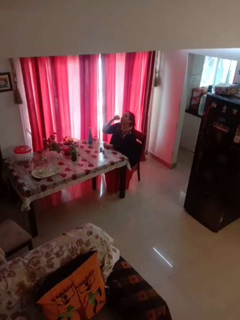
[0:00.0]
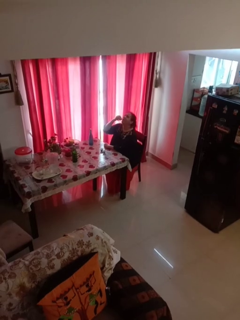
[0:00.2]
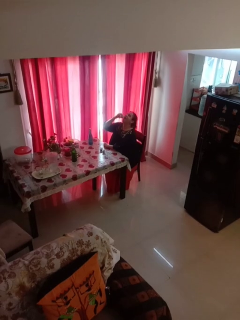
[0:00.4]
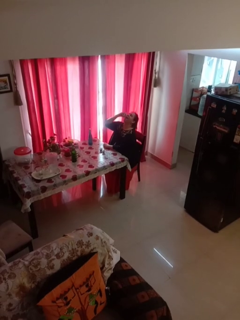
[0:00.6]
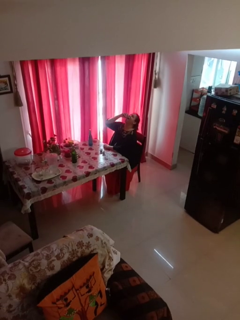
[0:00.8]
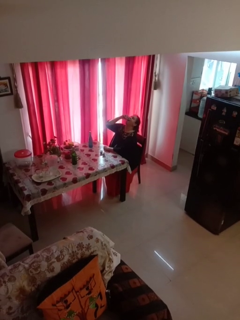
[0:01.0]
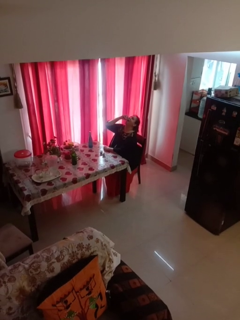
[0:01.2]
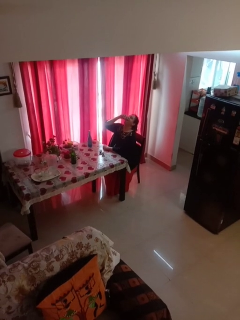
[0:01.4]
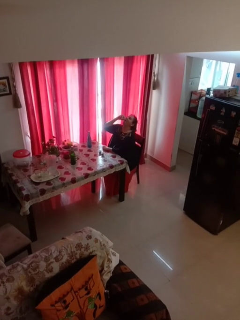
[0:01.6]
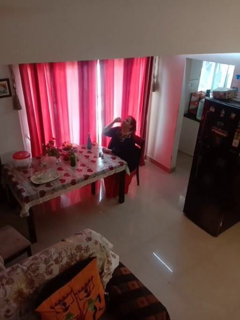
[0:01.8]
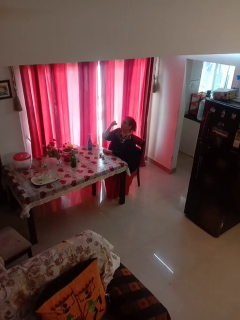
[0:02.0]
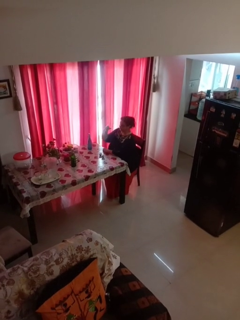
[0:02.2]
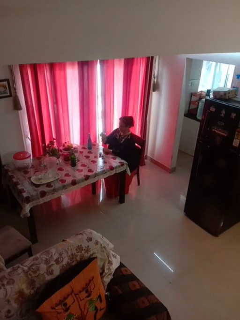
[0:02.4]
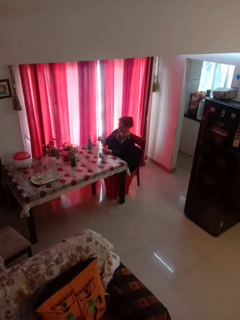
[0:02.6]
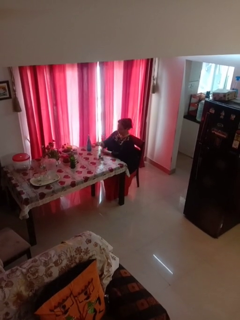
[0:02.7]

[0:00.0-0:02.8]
person drinks from shotglass

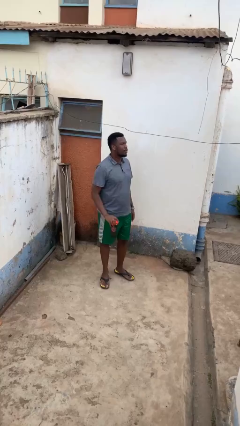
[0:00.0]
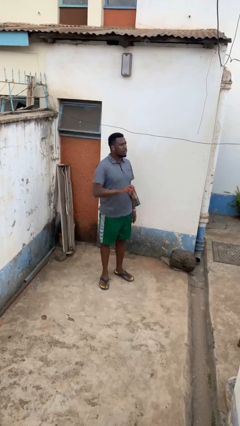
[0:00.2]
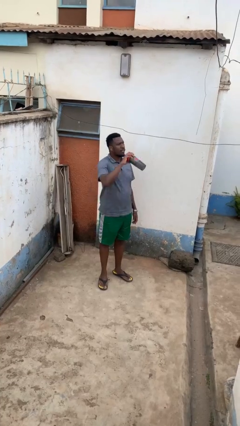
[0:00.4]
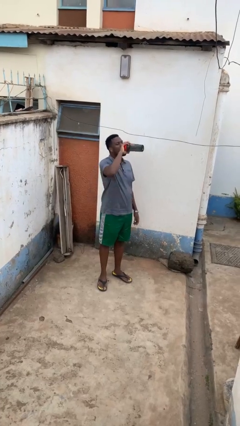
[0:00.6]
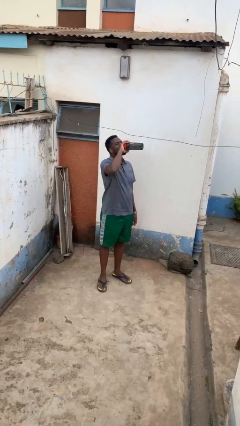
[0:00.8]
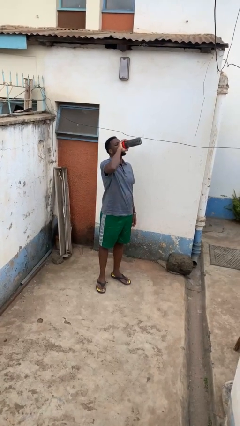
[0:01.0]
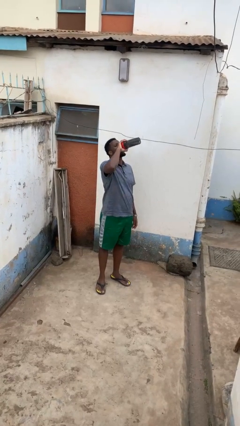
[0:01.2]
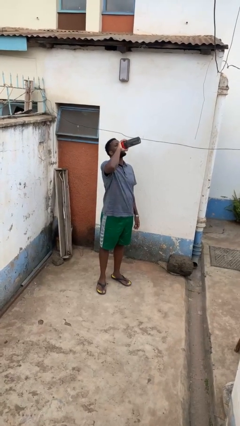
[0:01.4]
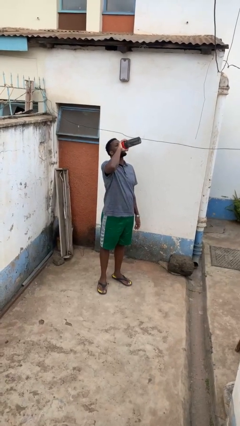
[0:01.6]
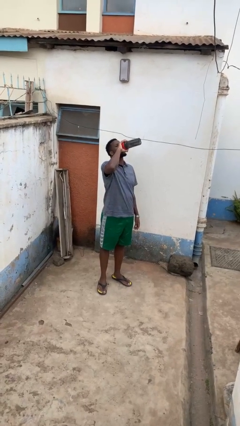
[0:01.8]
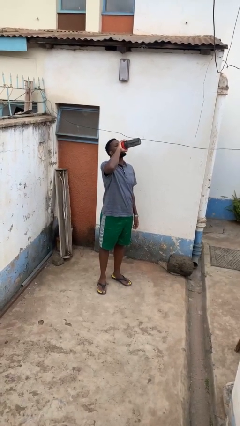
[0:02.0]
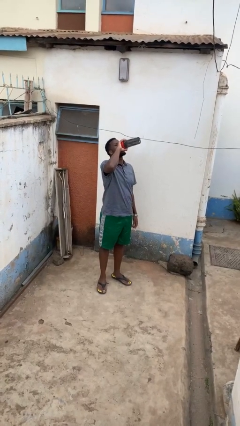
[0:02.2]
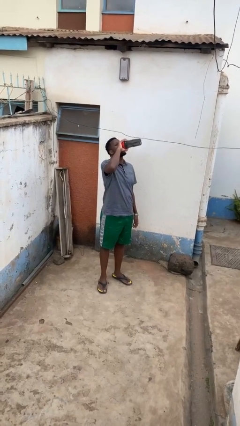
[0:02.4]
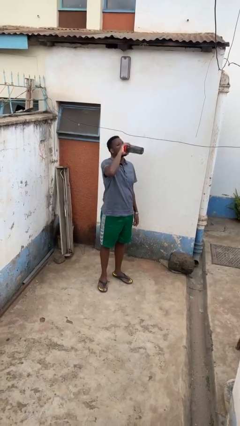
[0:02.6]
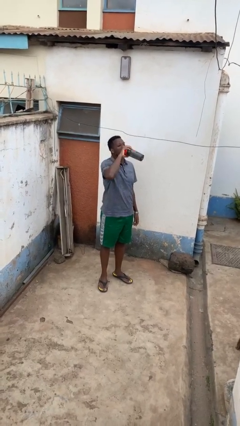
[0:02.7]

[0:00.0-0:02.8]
person drinks from bottle

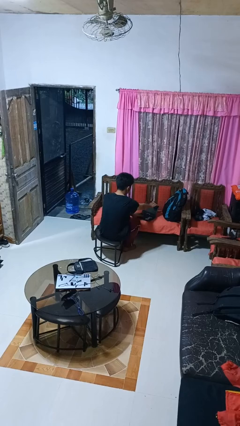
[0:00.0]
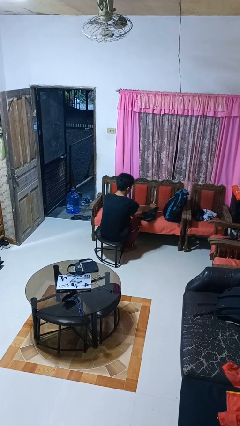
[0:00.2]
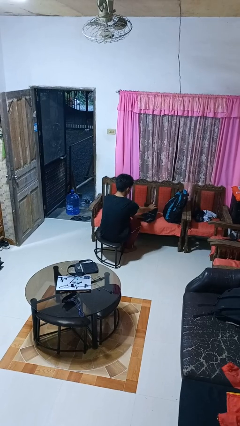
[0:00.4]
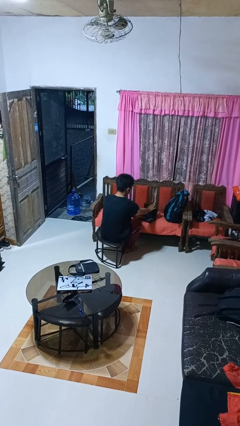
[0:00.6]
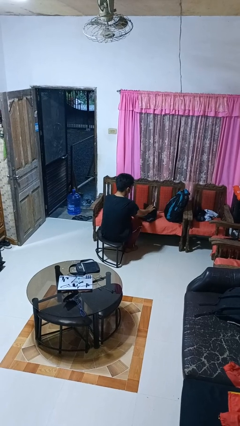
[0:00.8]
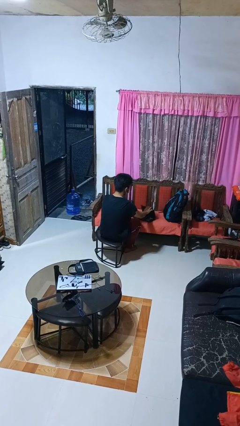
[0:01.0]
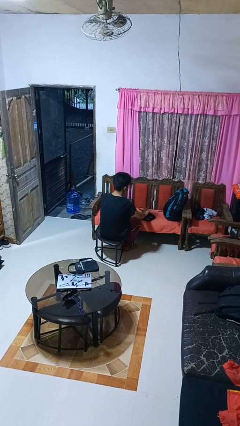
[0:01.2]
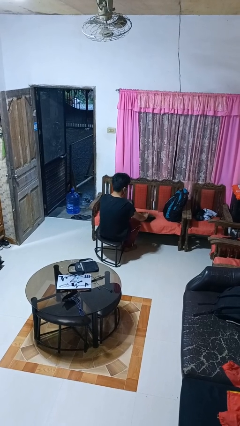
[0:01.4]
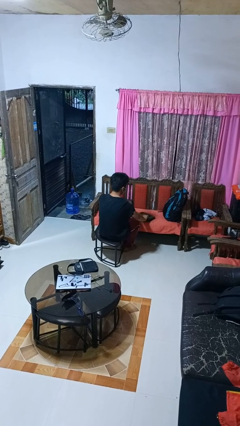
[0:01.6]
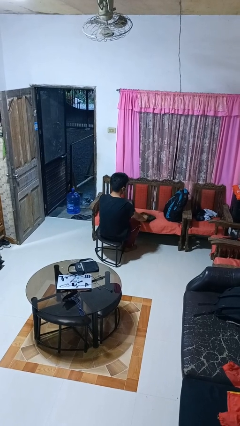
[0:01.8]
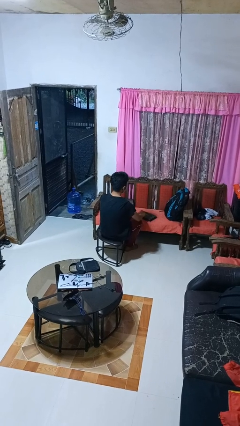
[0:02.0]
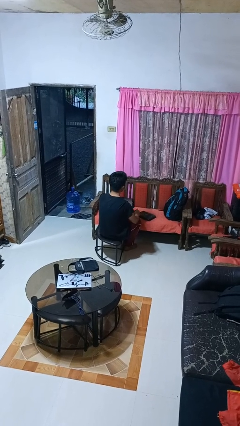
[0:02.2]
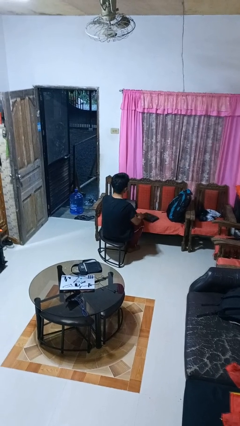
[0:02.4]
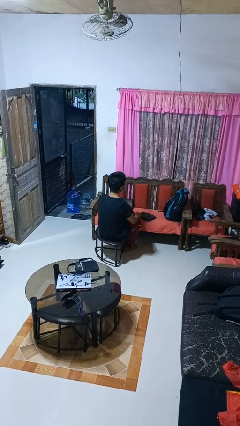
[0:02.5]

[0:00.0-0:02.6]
person closes laptop

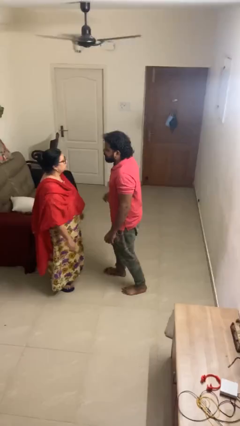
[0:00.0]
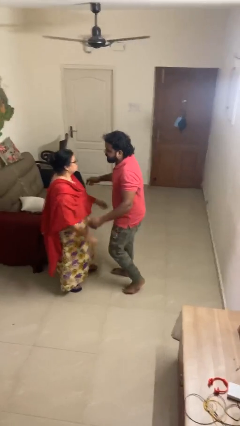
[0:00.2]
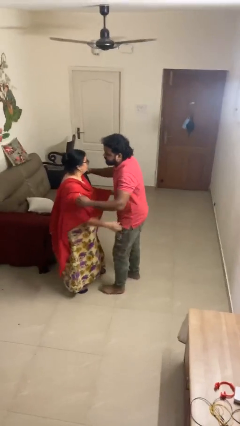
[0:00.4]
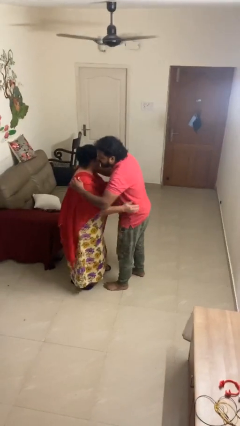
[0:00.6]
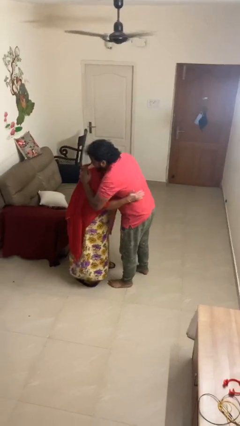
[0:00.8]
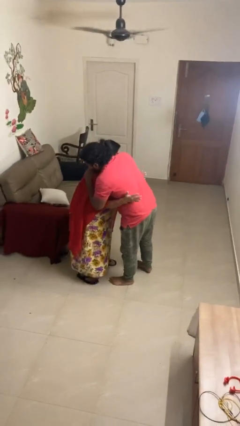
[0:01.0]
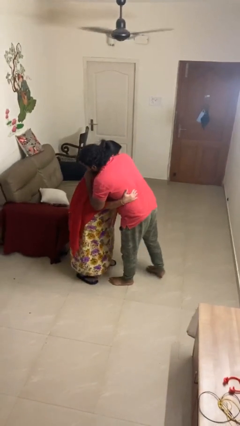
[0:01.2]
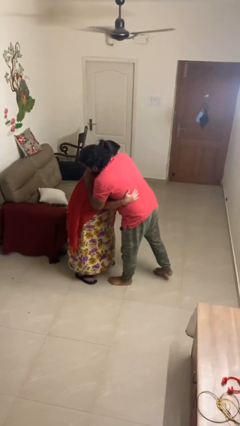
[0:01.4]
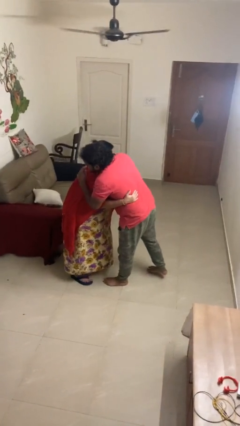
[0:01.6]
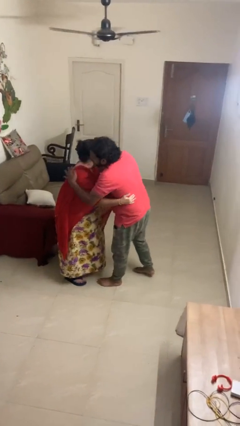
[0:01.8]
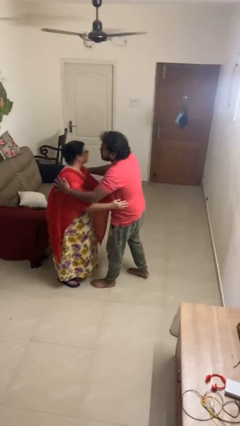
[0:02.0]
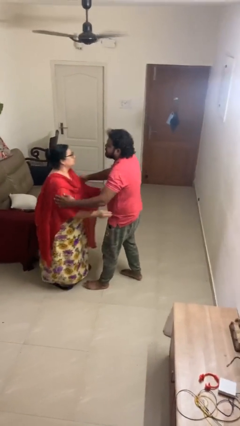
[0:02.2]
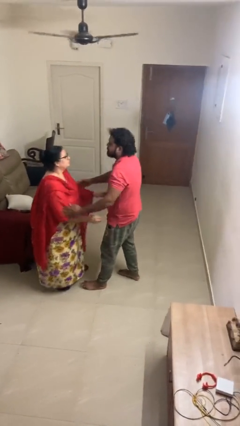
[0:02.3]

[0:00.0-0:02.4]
person embraces person

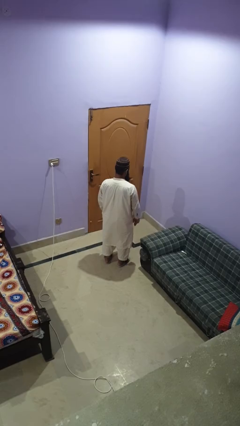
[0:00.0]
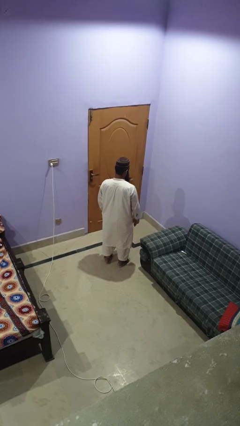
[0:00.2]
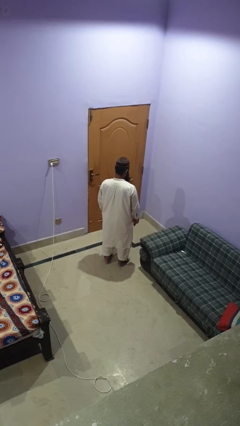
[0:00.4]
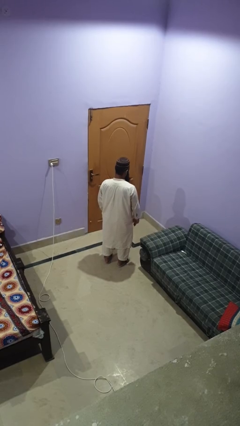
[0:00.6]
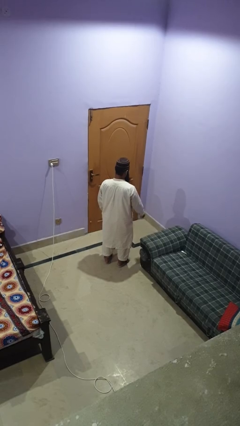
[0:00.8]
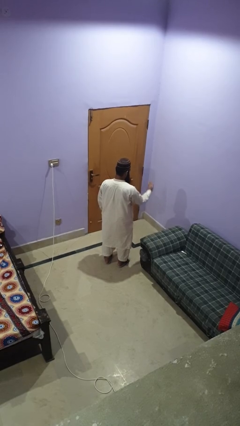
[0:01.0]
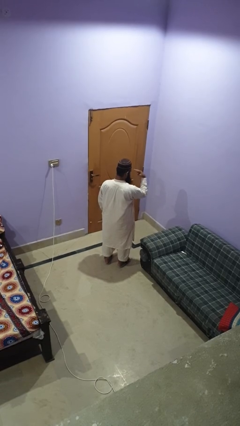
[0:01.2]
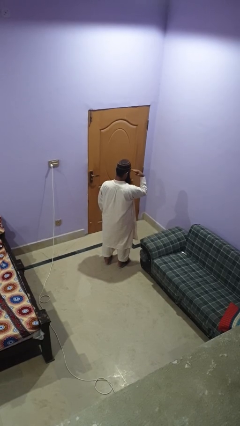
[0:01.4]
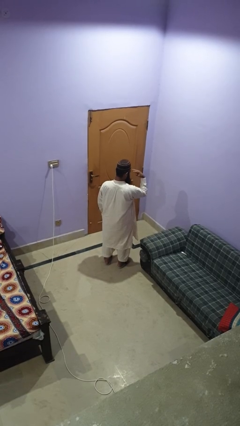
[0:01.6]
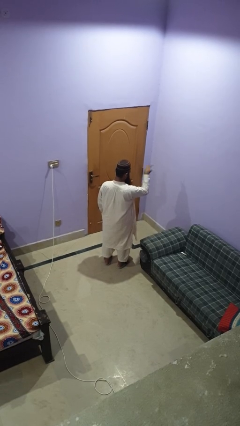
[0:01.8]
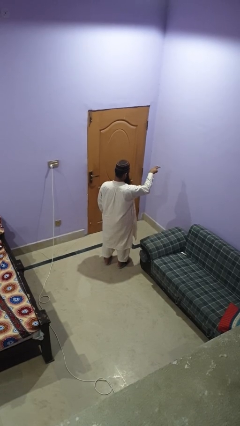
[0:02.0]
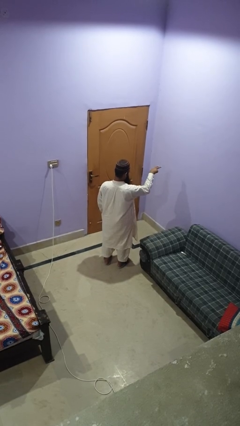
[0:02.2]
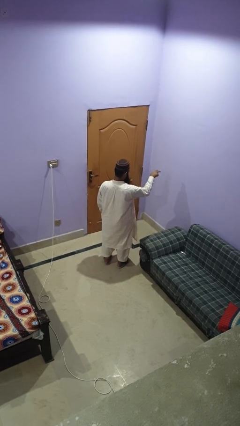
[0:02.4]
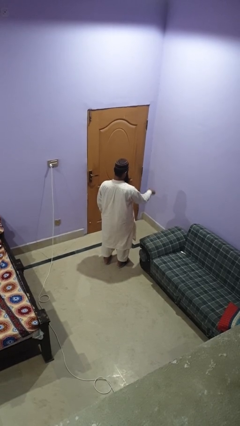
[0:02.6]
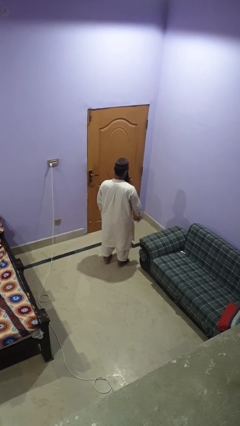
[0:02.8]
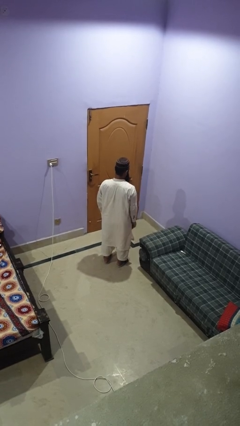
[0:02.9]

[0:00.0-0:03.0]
person gestures watch closely

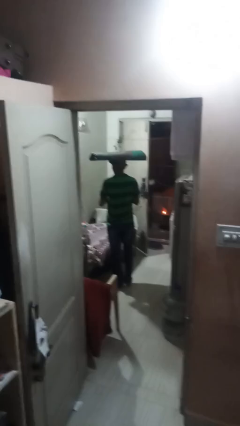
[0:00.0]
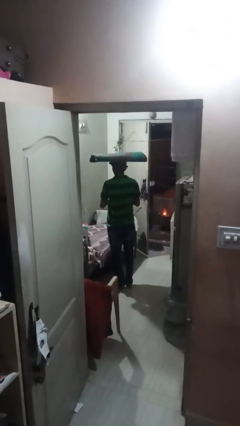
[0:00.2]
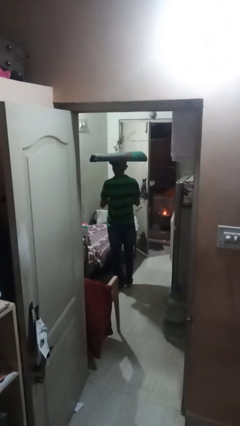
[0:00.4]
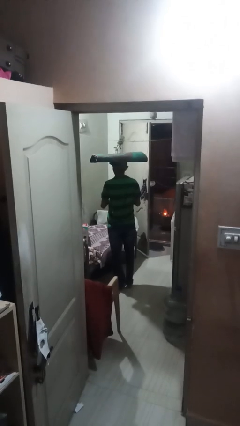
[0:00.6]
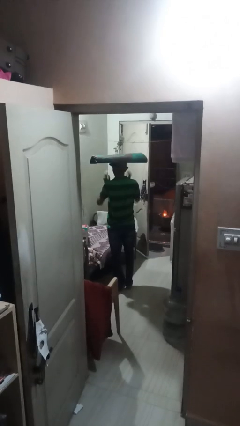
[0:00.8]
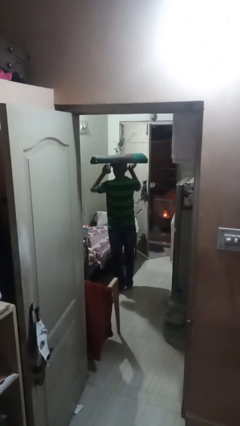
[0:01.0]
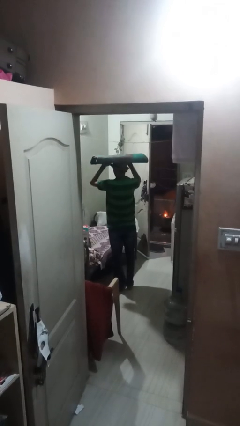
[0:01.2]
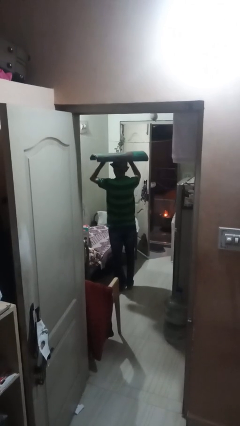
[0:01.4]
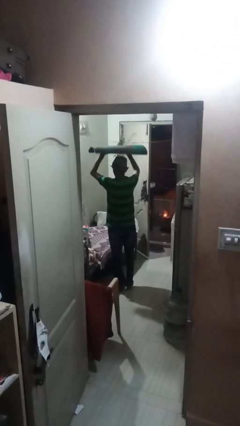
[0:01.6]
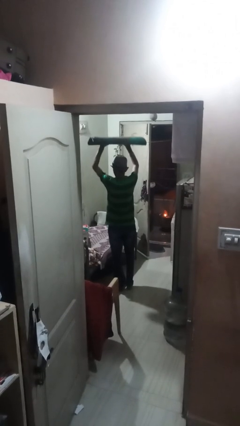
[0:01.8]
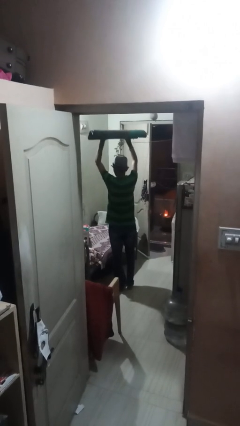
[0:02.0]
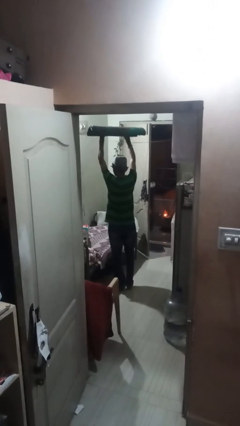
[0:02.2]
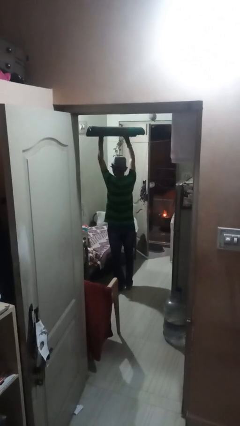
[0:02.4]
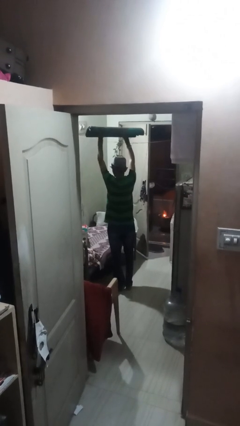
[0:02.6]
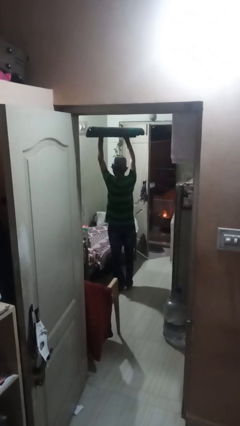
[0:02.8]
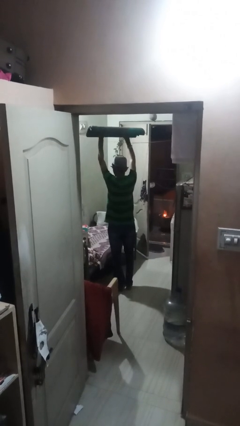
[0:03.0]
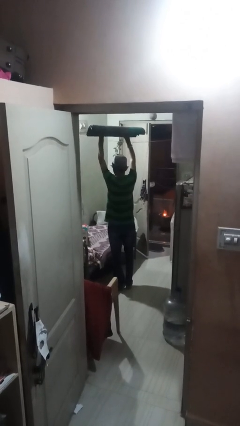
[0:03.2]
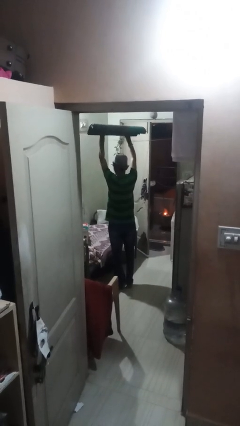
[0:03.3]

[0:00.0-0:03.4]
person holds object above head

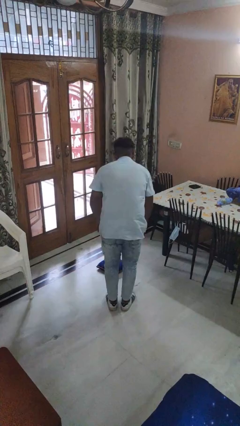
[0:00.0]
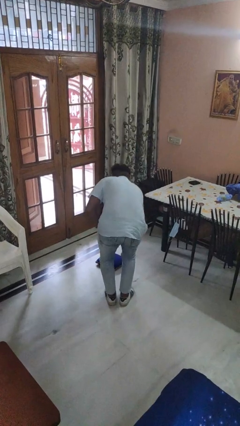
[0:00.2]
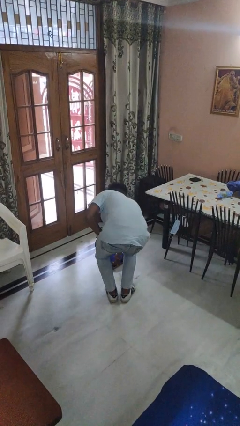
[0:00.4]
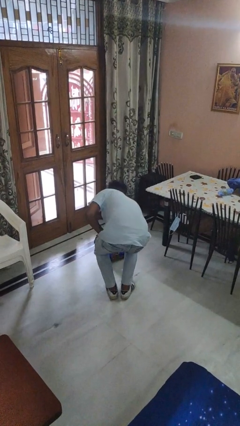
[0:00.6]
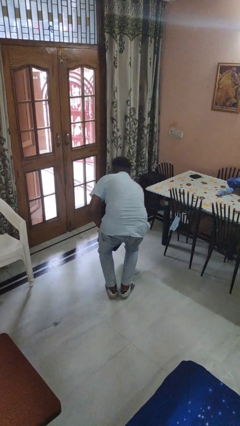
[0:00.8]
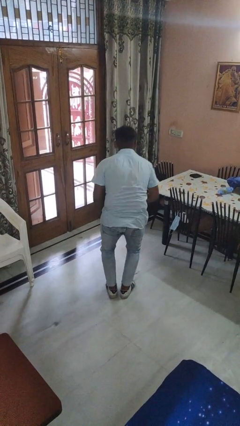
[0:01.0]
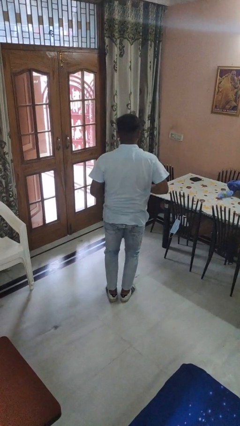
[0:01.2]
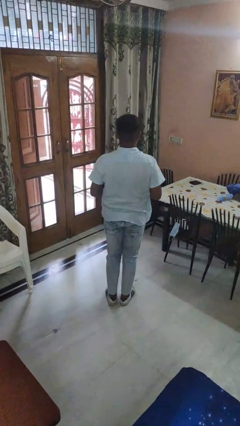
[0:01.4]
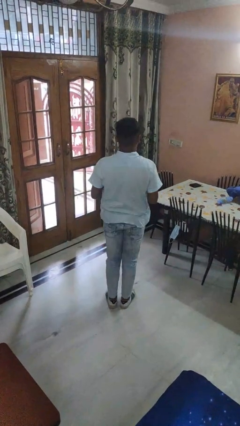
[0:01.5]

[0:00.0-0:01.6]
person picks up object from floor
